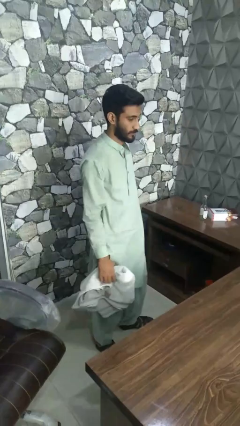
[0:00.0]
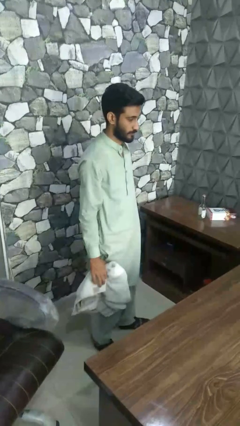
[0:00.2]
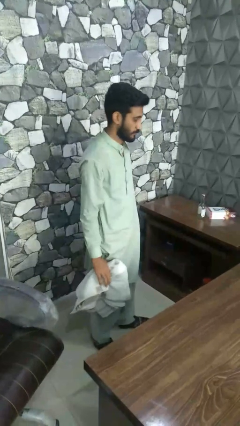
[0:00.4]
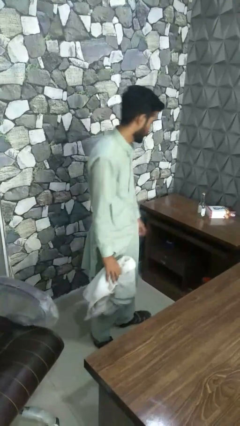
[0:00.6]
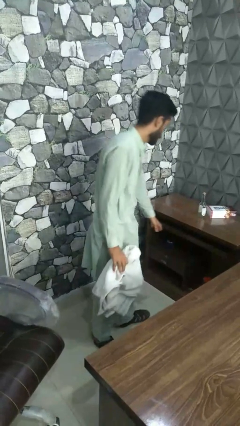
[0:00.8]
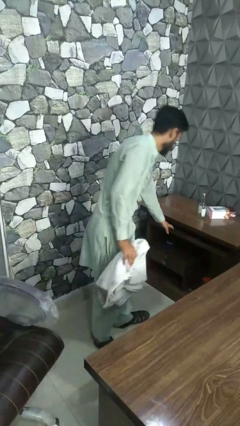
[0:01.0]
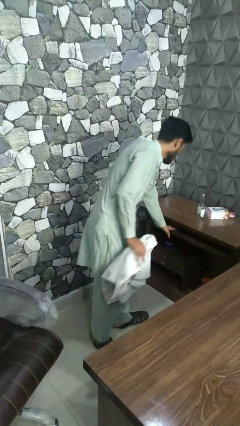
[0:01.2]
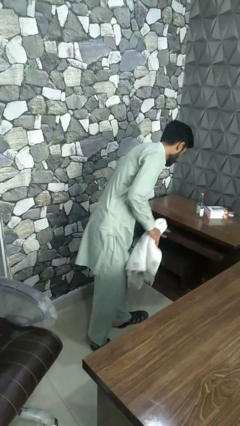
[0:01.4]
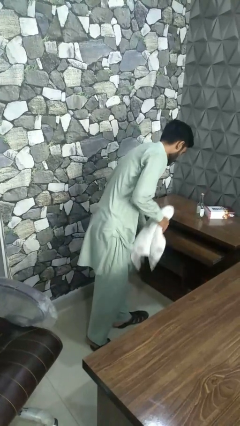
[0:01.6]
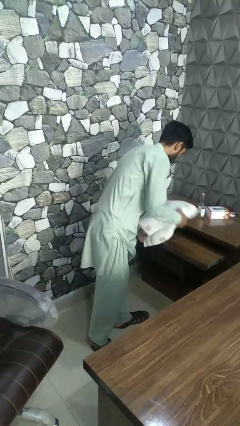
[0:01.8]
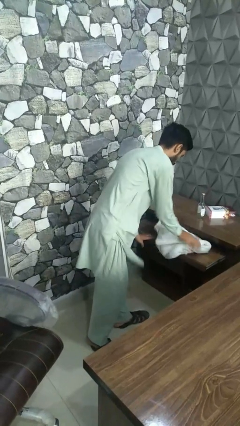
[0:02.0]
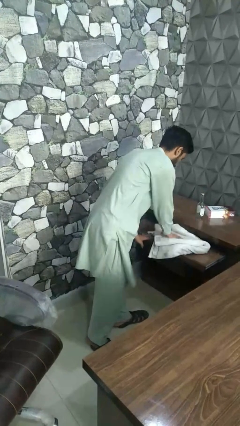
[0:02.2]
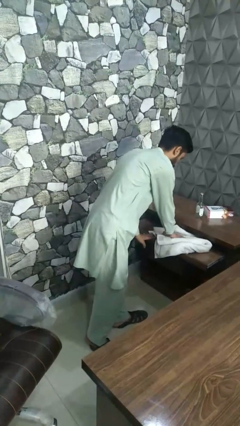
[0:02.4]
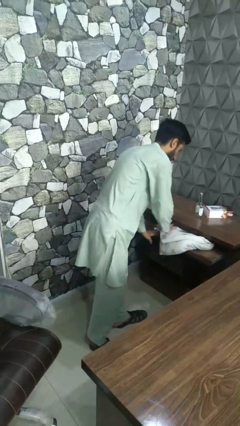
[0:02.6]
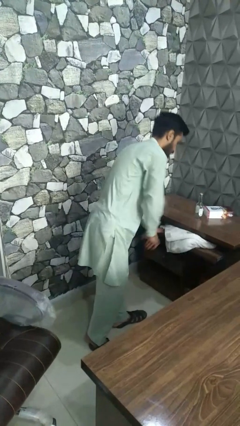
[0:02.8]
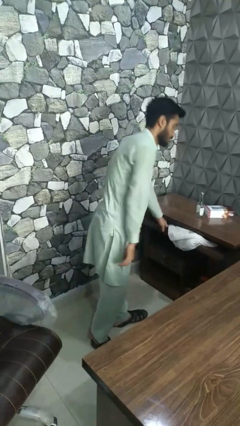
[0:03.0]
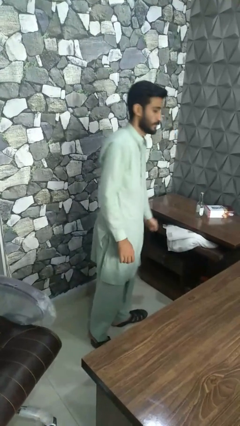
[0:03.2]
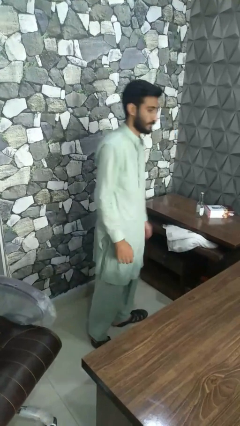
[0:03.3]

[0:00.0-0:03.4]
person puts clothes into dresser

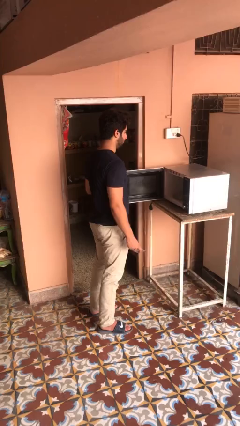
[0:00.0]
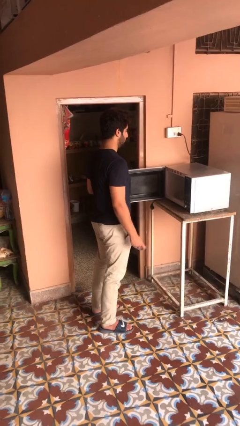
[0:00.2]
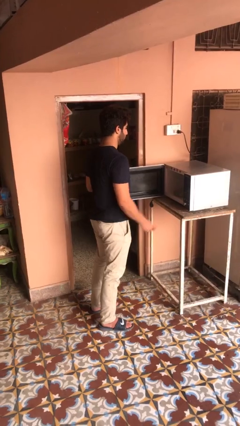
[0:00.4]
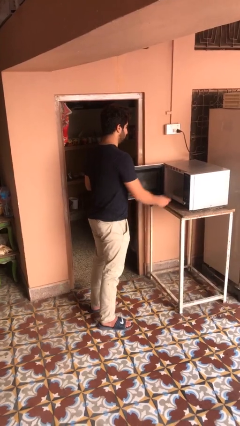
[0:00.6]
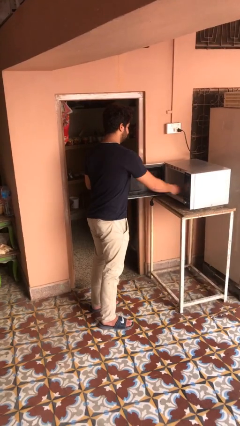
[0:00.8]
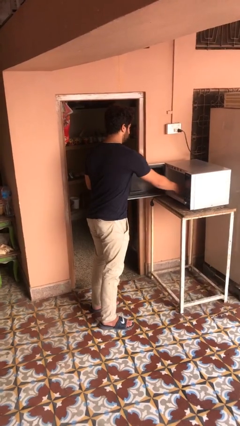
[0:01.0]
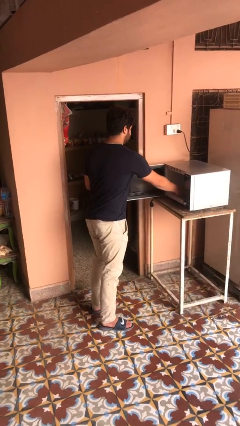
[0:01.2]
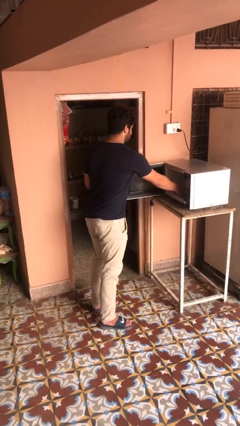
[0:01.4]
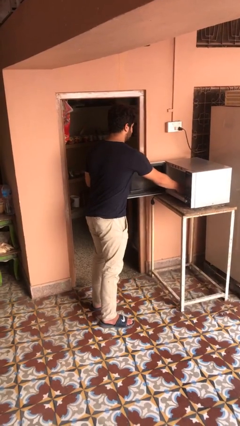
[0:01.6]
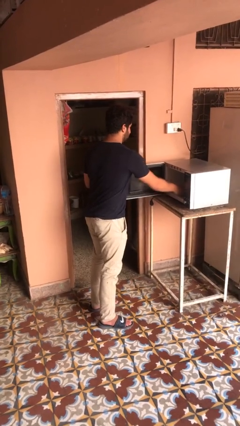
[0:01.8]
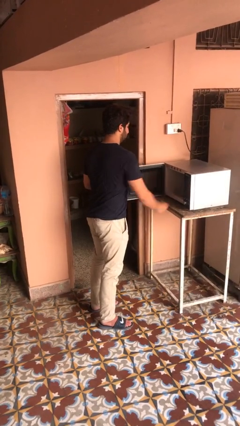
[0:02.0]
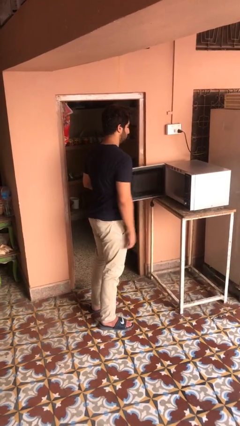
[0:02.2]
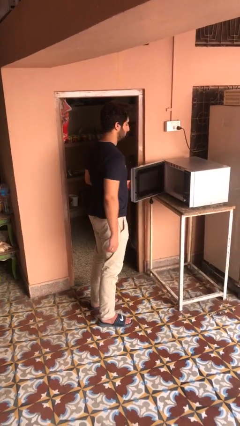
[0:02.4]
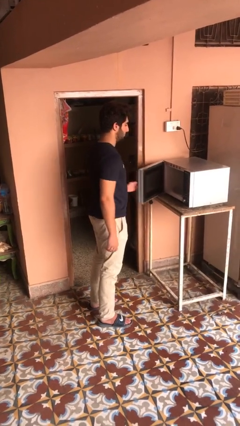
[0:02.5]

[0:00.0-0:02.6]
person puts object into microwave

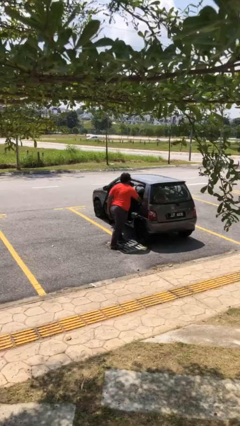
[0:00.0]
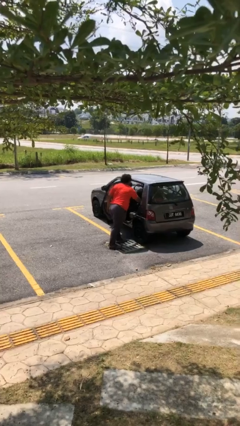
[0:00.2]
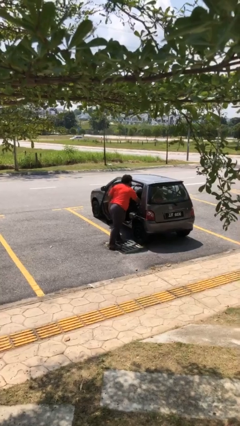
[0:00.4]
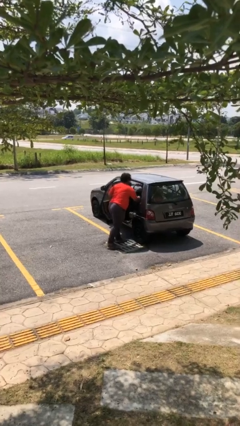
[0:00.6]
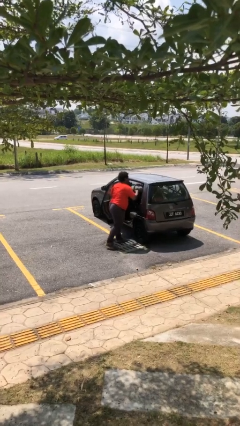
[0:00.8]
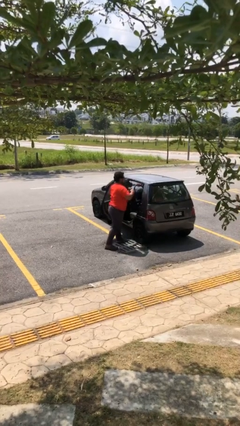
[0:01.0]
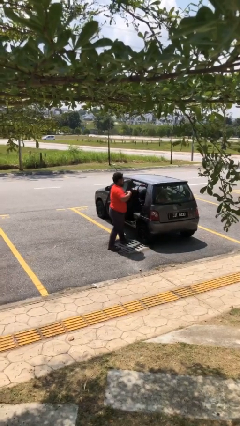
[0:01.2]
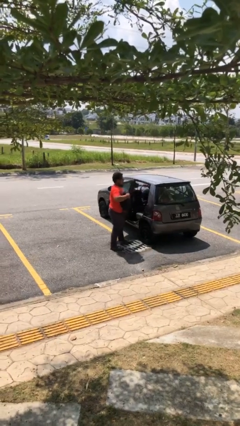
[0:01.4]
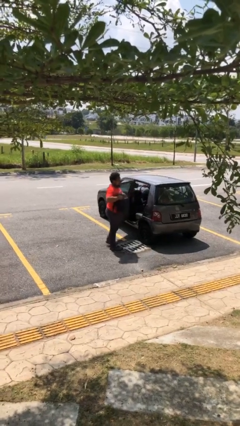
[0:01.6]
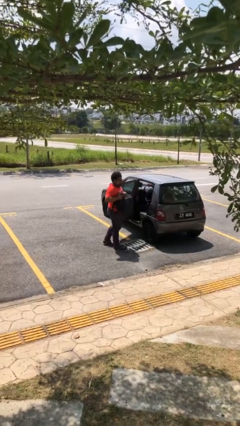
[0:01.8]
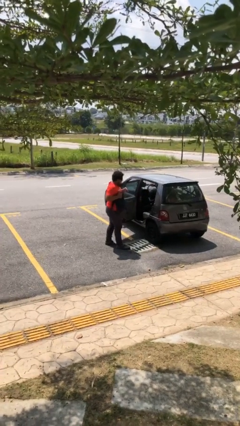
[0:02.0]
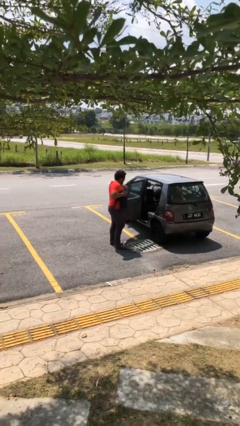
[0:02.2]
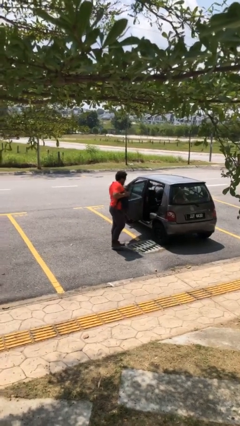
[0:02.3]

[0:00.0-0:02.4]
person unloads car

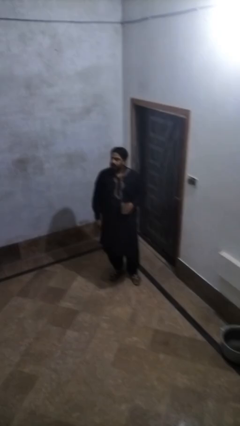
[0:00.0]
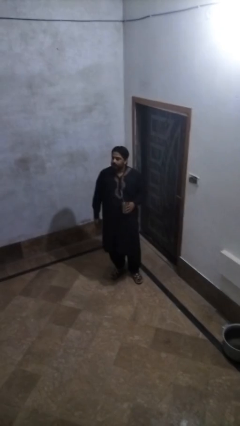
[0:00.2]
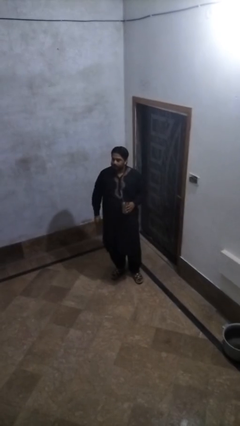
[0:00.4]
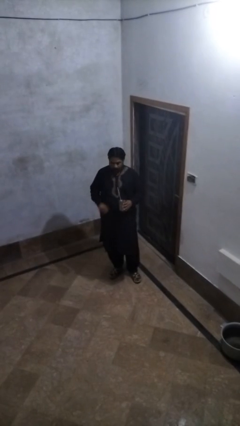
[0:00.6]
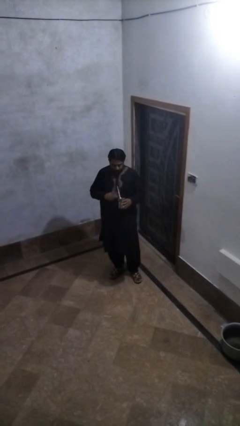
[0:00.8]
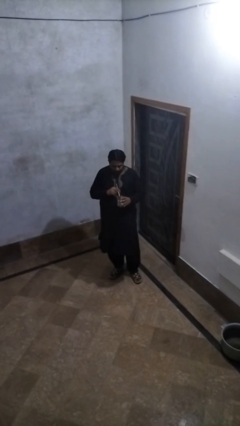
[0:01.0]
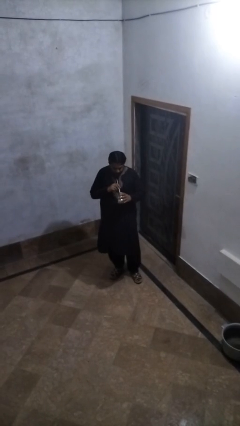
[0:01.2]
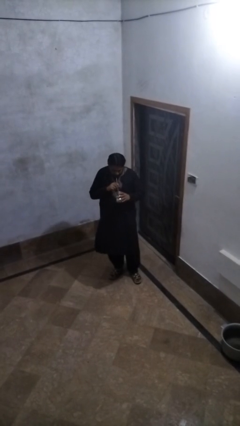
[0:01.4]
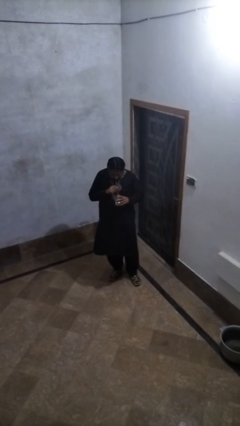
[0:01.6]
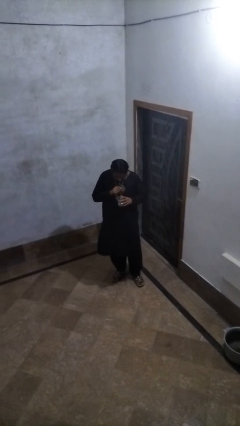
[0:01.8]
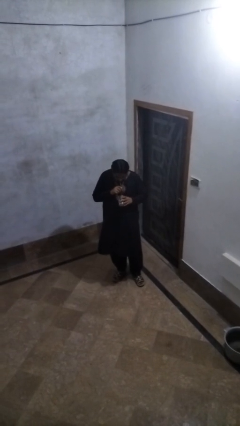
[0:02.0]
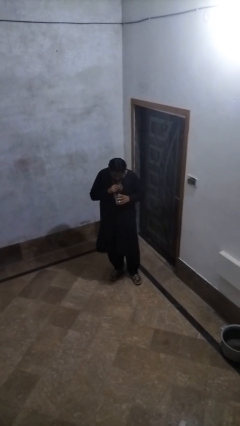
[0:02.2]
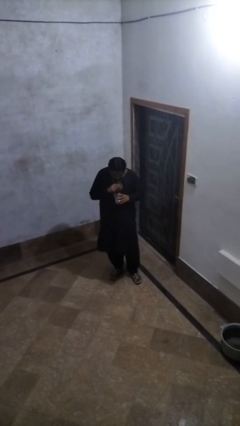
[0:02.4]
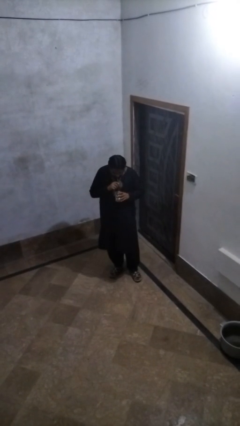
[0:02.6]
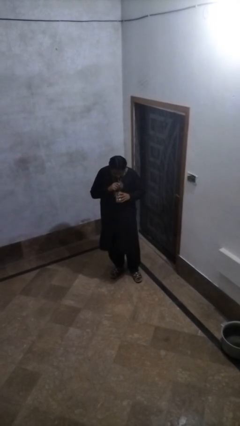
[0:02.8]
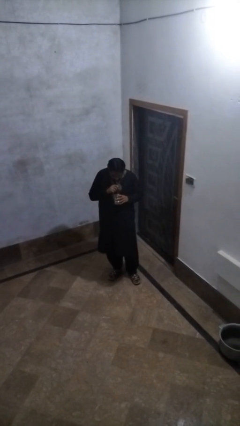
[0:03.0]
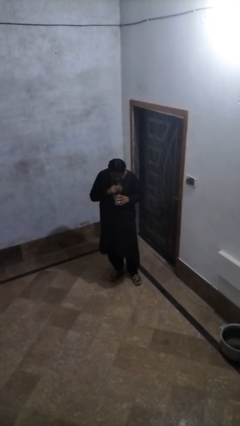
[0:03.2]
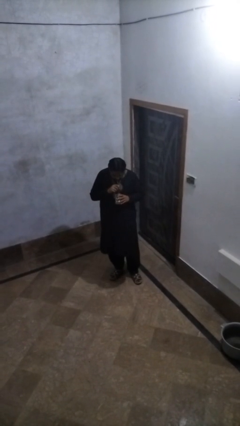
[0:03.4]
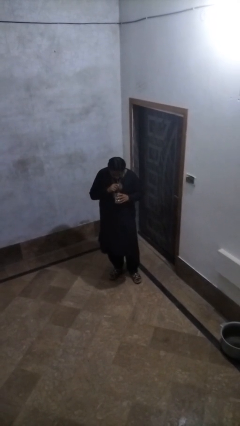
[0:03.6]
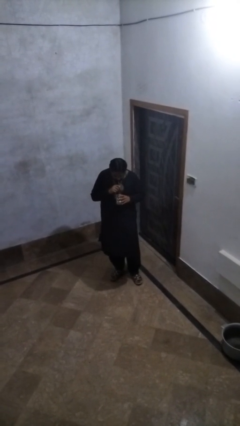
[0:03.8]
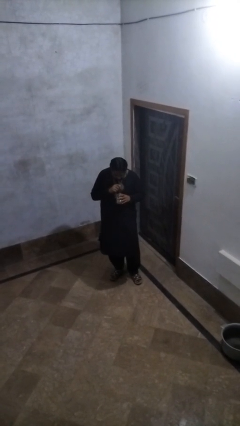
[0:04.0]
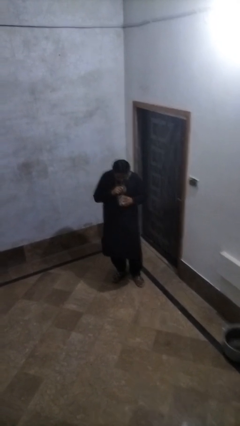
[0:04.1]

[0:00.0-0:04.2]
person drinks from straw

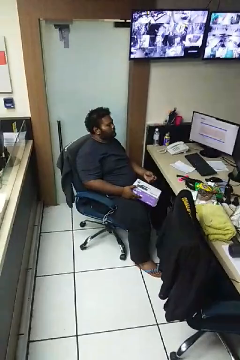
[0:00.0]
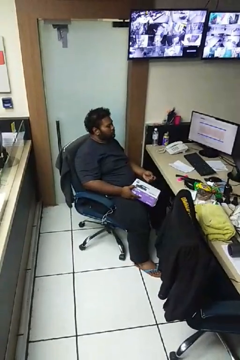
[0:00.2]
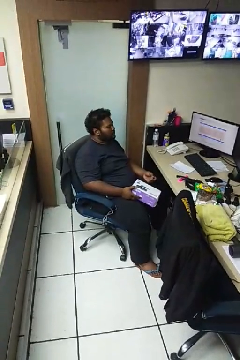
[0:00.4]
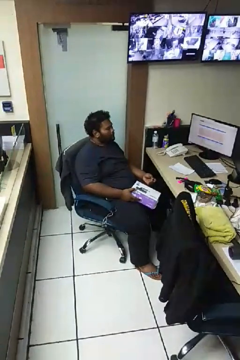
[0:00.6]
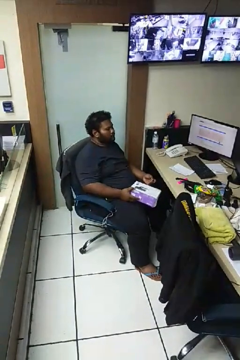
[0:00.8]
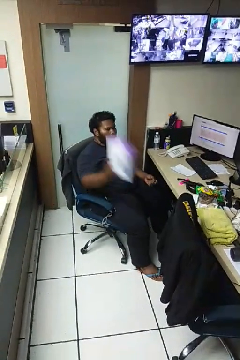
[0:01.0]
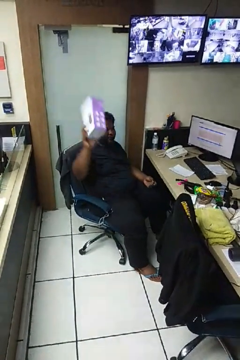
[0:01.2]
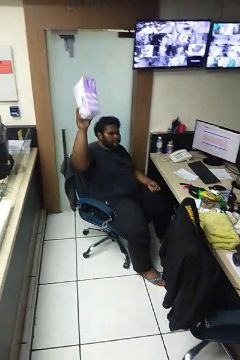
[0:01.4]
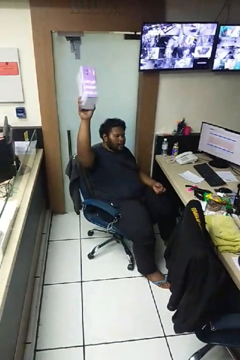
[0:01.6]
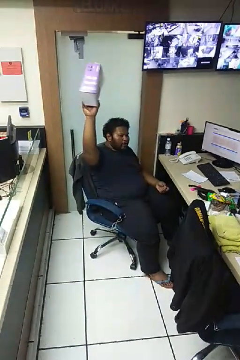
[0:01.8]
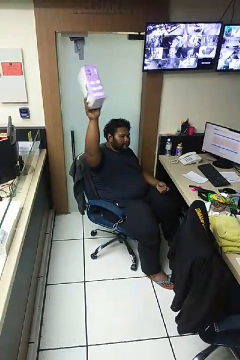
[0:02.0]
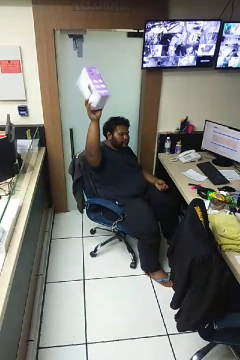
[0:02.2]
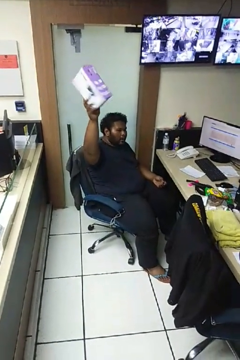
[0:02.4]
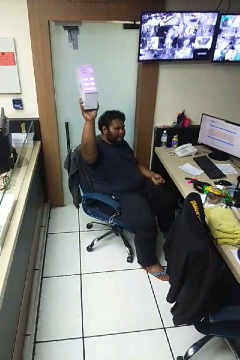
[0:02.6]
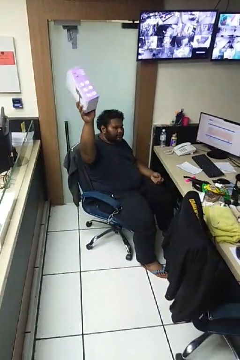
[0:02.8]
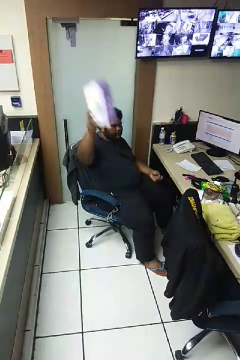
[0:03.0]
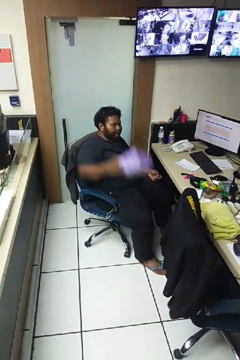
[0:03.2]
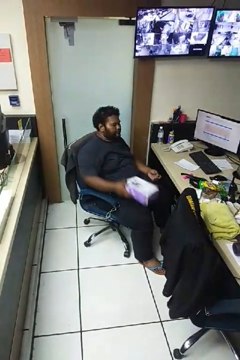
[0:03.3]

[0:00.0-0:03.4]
person holds object above head

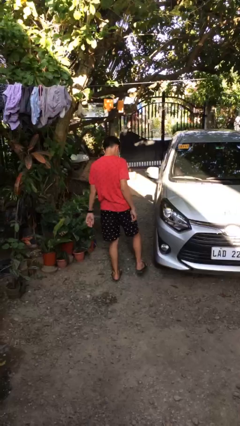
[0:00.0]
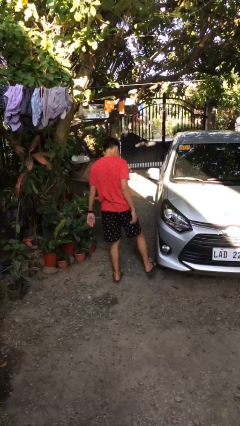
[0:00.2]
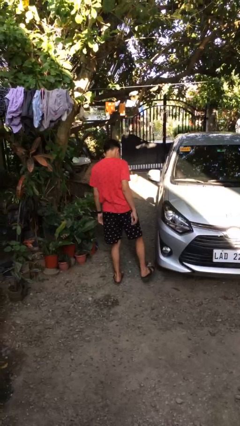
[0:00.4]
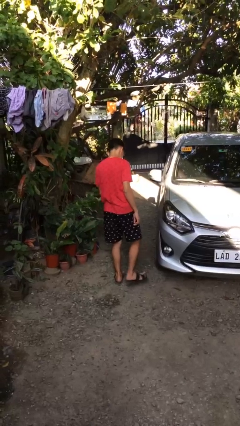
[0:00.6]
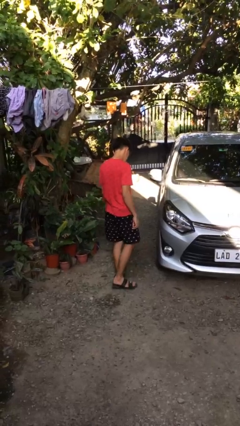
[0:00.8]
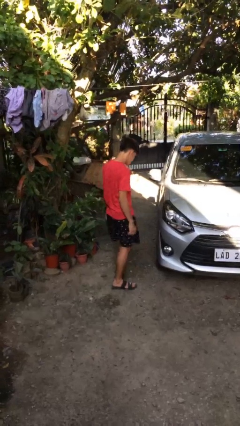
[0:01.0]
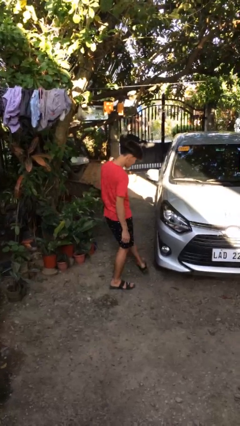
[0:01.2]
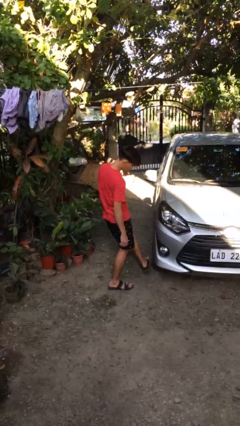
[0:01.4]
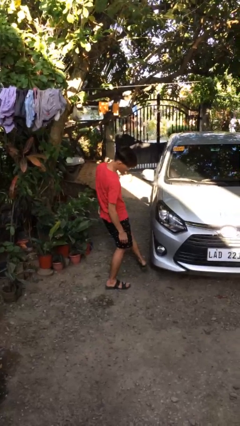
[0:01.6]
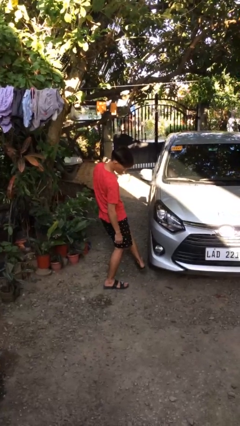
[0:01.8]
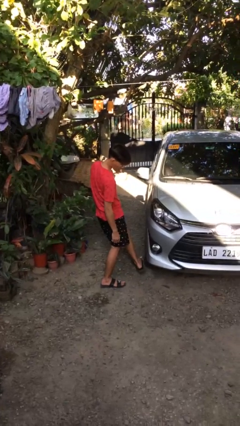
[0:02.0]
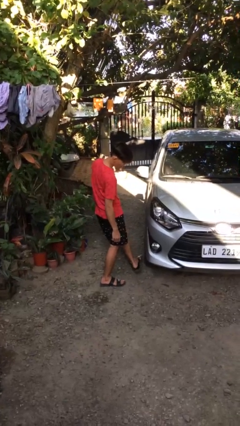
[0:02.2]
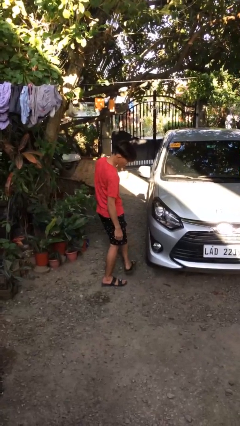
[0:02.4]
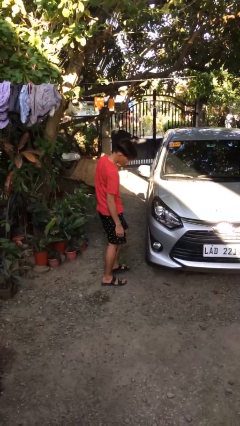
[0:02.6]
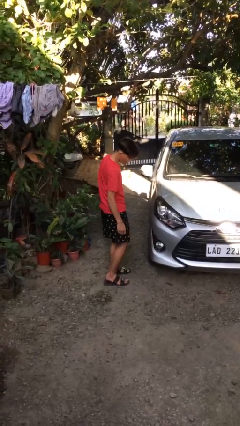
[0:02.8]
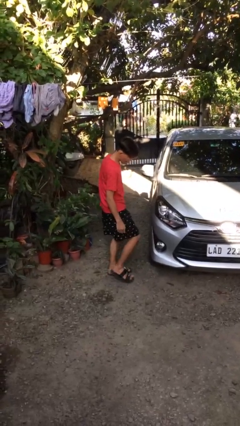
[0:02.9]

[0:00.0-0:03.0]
person kicks car tires
